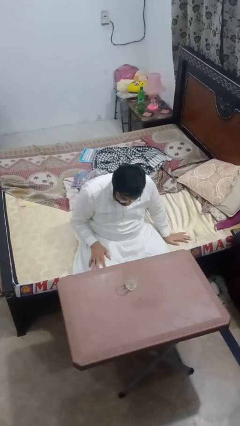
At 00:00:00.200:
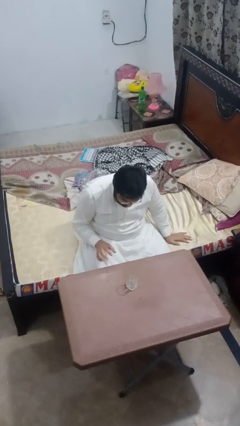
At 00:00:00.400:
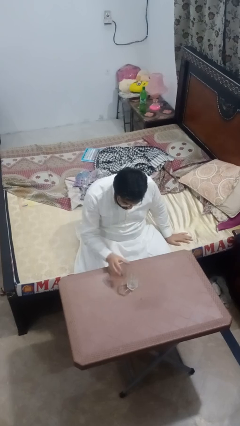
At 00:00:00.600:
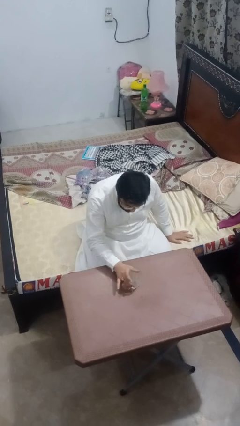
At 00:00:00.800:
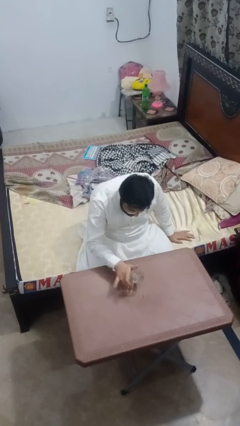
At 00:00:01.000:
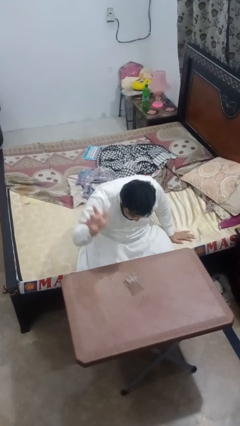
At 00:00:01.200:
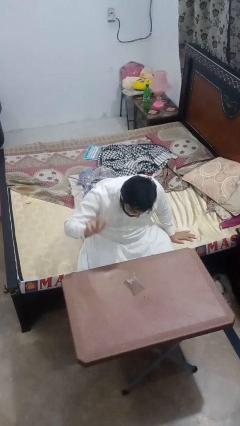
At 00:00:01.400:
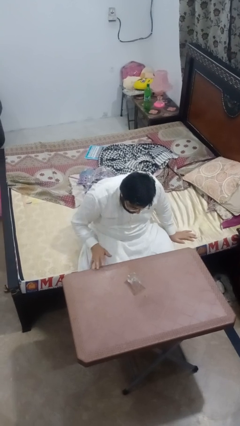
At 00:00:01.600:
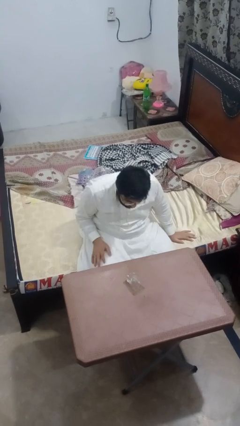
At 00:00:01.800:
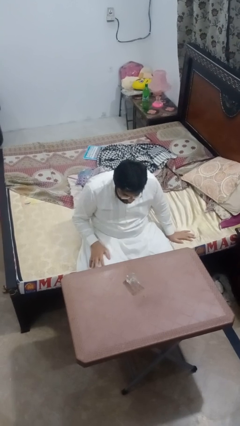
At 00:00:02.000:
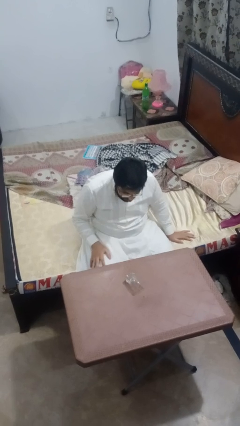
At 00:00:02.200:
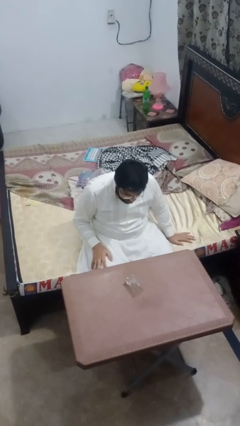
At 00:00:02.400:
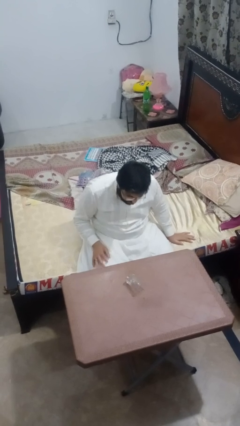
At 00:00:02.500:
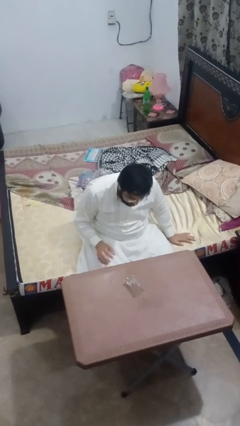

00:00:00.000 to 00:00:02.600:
person knocks over glass

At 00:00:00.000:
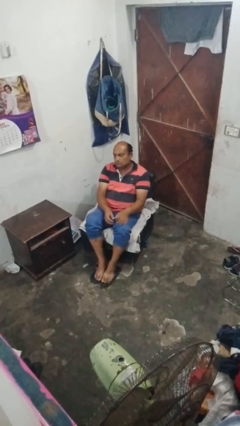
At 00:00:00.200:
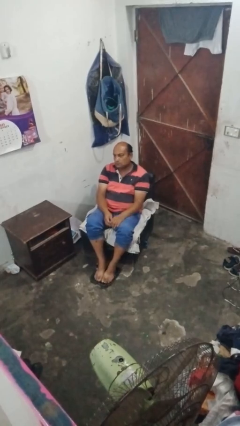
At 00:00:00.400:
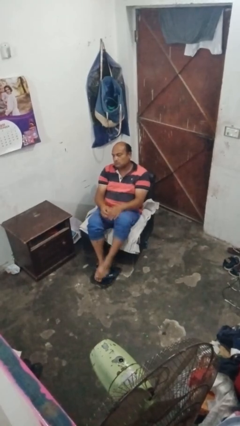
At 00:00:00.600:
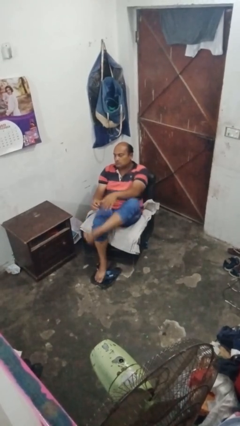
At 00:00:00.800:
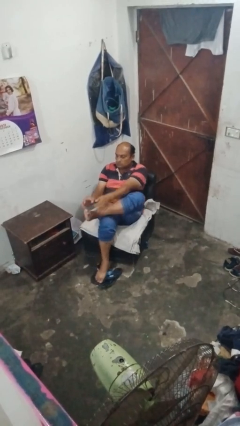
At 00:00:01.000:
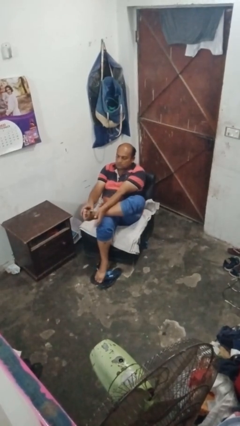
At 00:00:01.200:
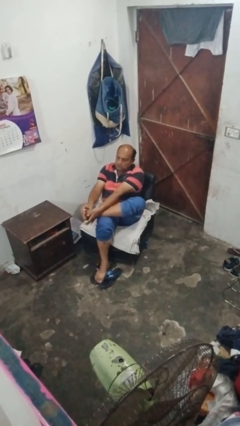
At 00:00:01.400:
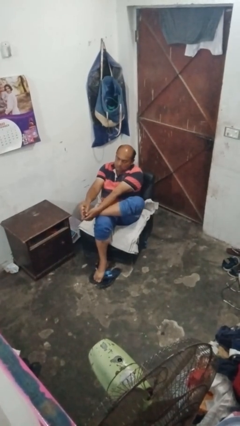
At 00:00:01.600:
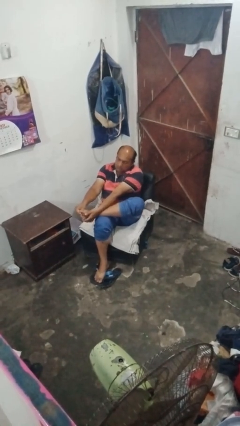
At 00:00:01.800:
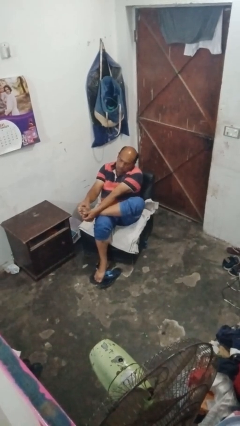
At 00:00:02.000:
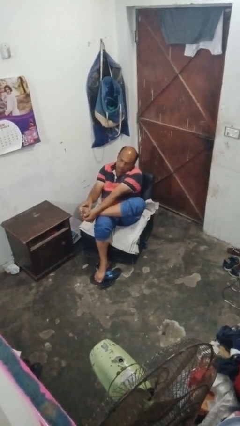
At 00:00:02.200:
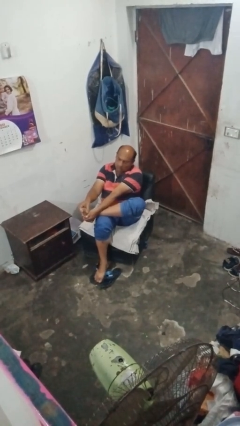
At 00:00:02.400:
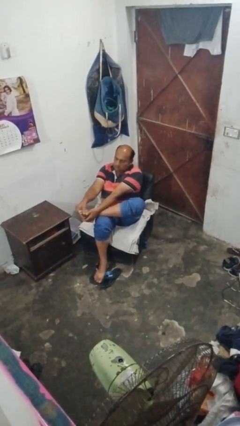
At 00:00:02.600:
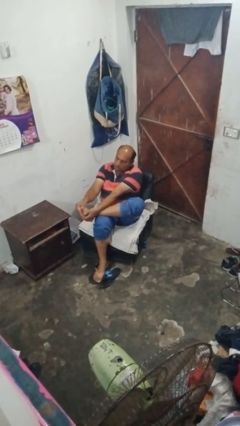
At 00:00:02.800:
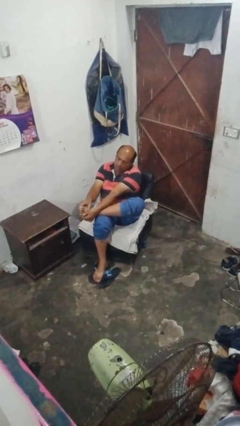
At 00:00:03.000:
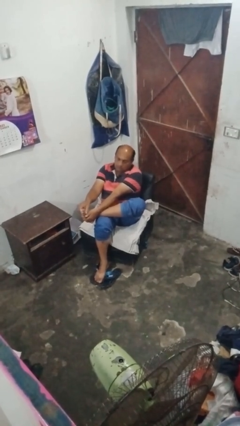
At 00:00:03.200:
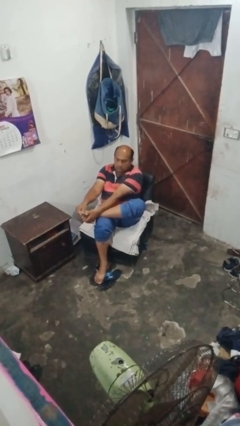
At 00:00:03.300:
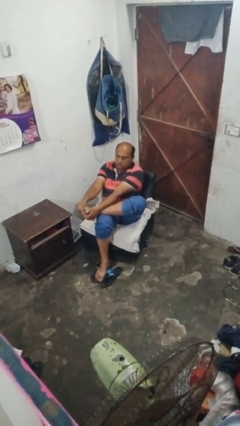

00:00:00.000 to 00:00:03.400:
person rubs foot

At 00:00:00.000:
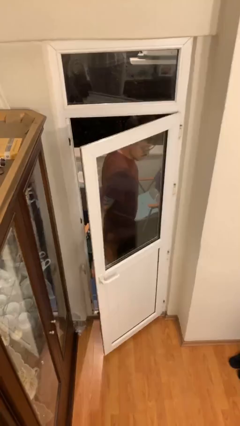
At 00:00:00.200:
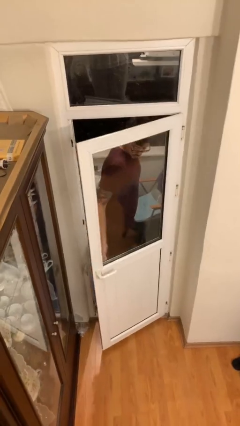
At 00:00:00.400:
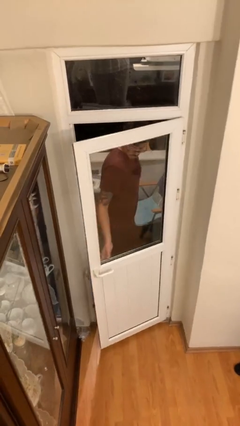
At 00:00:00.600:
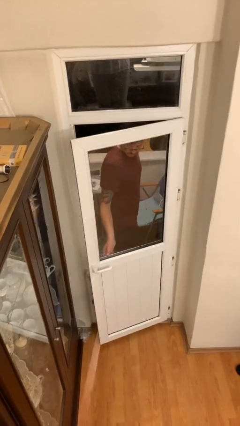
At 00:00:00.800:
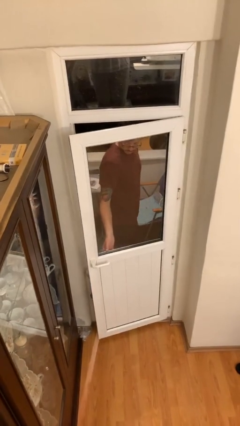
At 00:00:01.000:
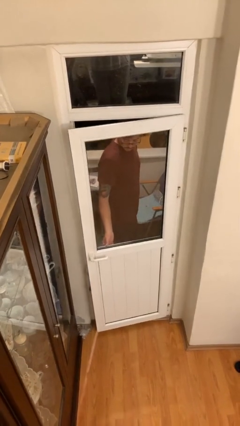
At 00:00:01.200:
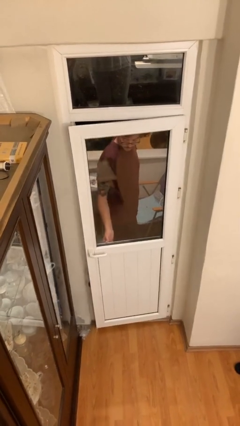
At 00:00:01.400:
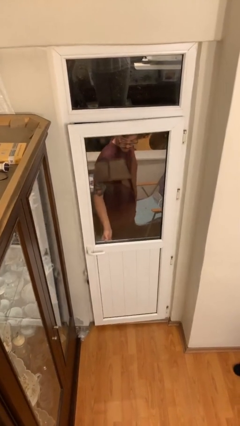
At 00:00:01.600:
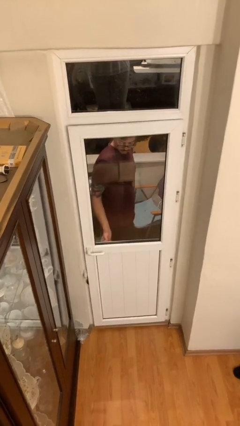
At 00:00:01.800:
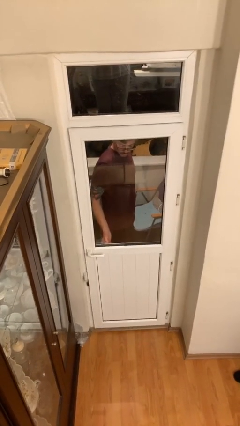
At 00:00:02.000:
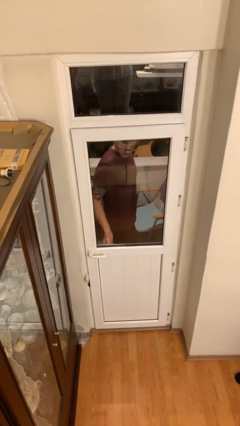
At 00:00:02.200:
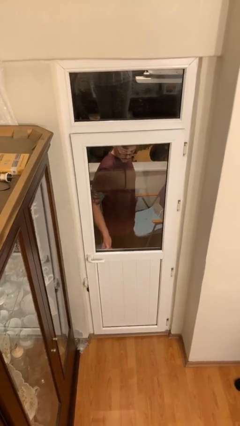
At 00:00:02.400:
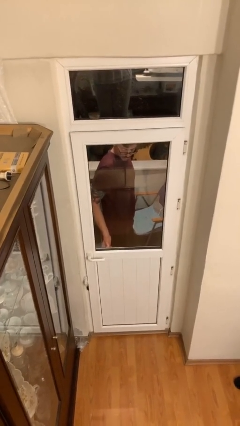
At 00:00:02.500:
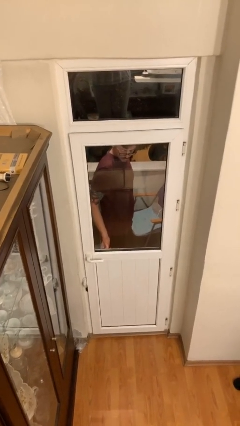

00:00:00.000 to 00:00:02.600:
person closes facility door

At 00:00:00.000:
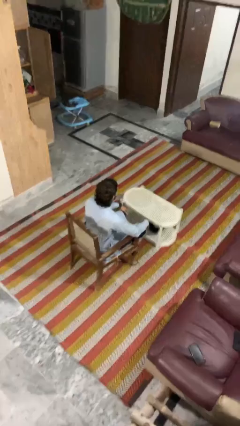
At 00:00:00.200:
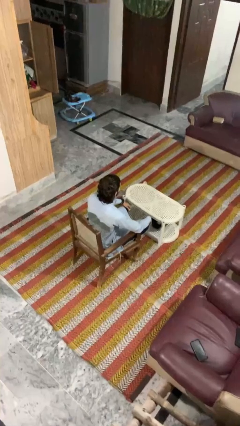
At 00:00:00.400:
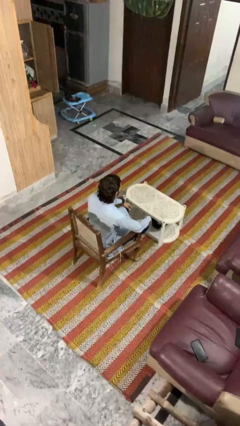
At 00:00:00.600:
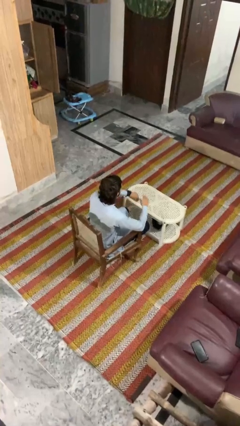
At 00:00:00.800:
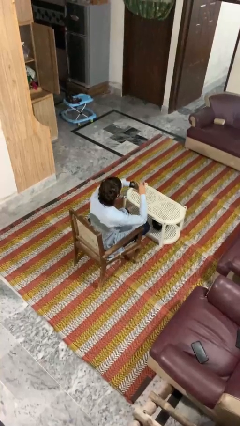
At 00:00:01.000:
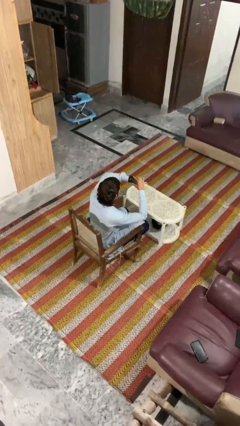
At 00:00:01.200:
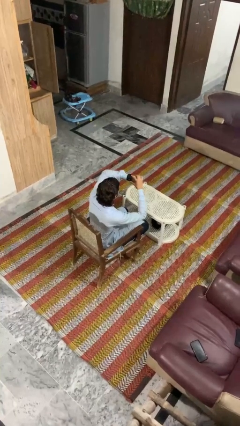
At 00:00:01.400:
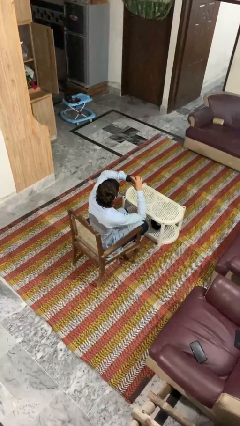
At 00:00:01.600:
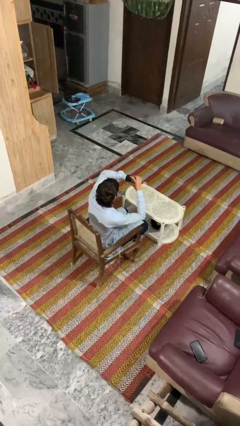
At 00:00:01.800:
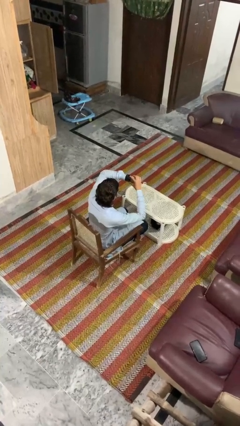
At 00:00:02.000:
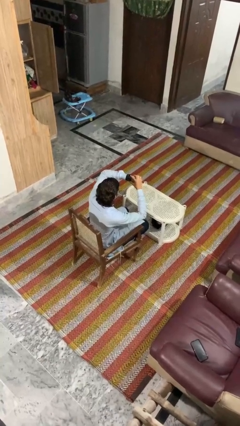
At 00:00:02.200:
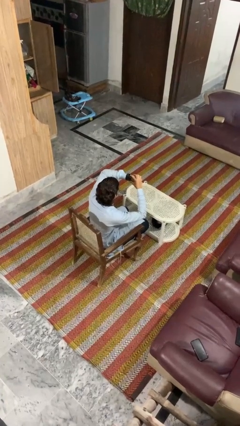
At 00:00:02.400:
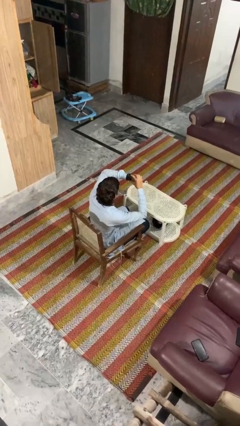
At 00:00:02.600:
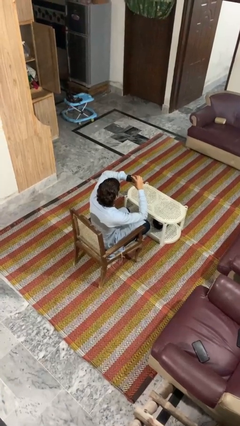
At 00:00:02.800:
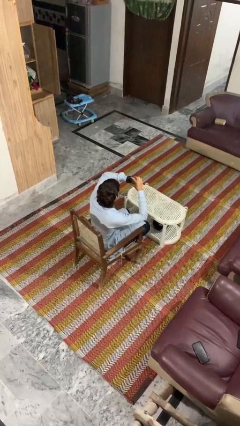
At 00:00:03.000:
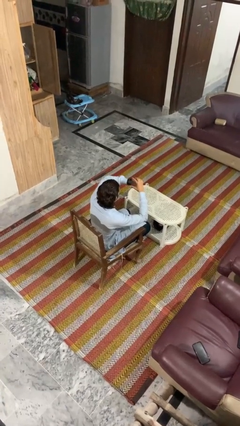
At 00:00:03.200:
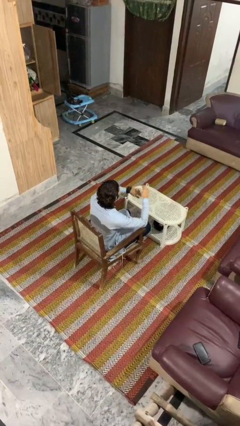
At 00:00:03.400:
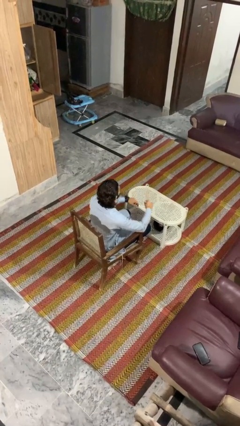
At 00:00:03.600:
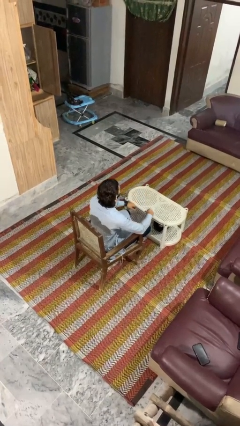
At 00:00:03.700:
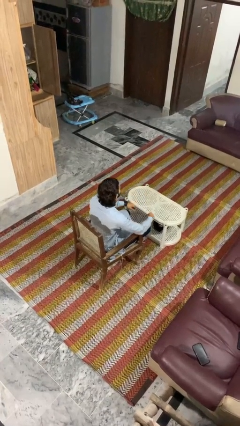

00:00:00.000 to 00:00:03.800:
person looks at wristwatch

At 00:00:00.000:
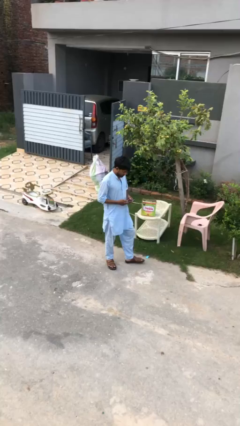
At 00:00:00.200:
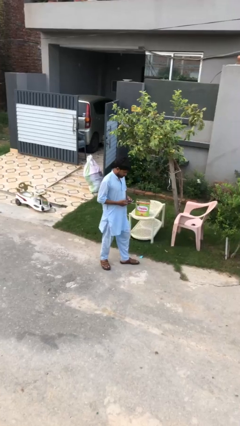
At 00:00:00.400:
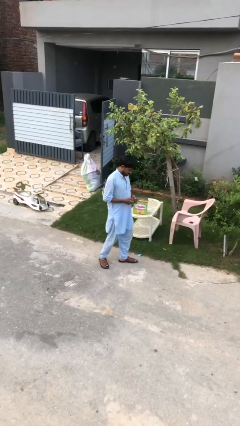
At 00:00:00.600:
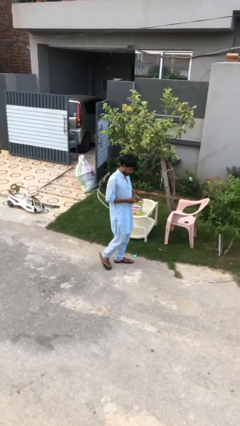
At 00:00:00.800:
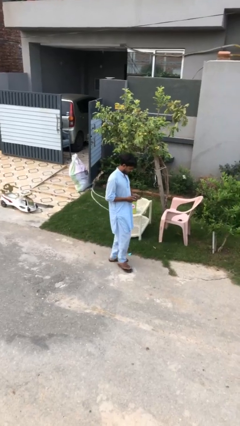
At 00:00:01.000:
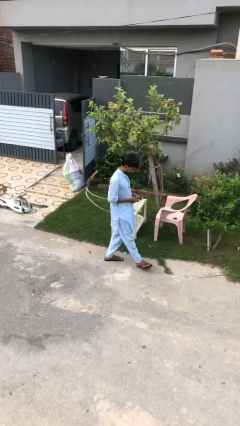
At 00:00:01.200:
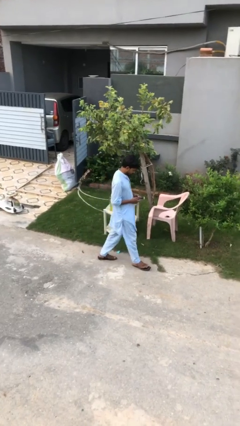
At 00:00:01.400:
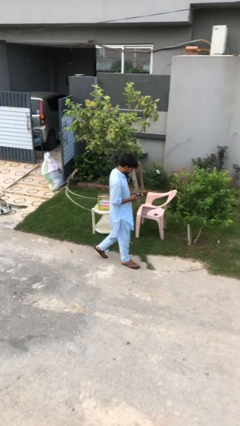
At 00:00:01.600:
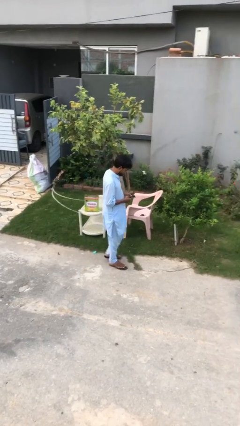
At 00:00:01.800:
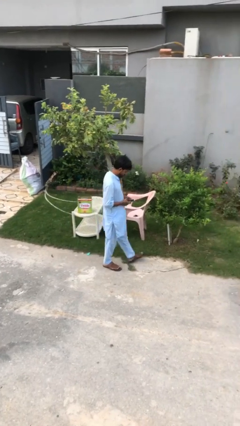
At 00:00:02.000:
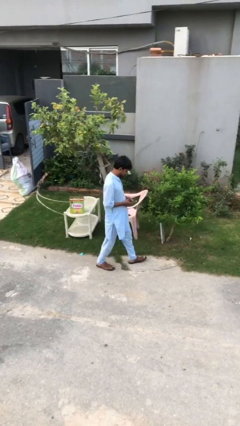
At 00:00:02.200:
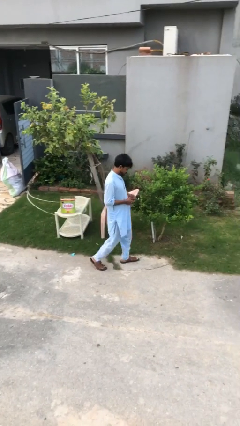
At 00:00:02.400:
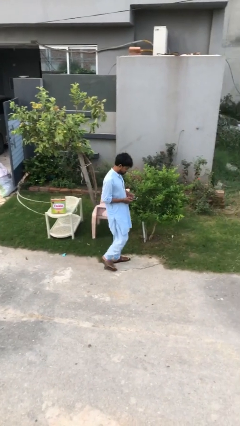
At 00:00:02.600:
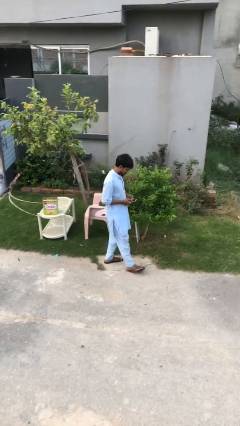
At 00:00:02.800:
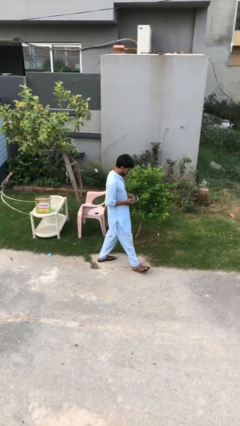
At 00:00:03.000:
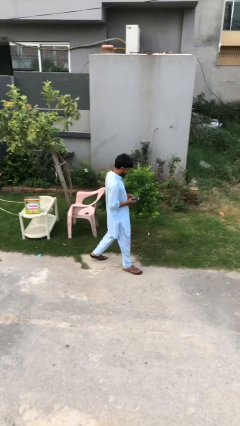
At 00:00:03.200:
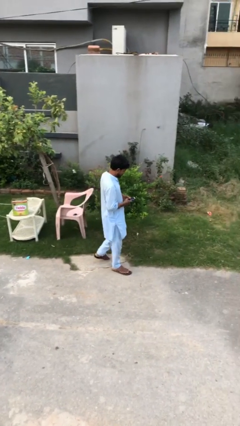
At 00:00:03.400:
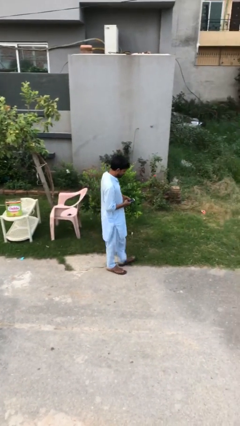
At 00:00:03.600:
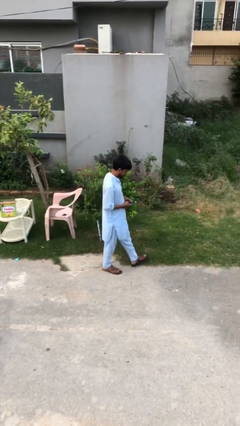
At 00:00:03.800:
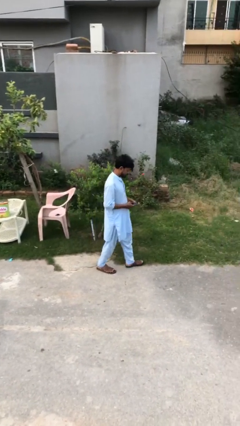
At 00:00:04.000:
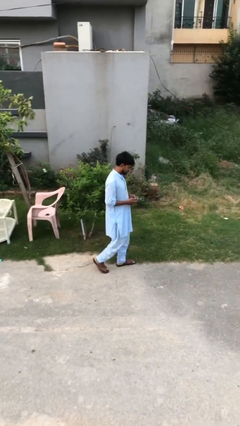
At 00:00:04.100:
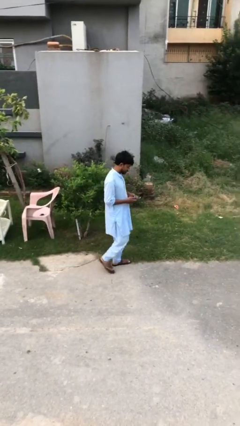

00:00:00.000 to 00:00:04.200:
person texts on phone

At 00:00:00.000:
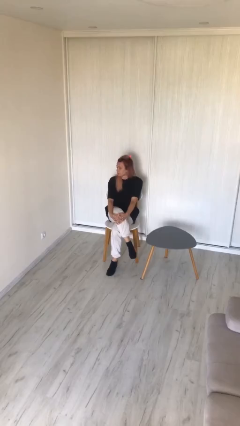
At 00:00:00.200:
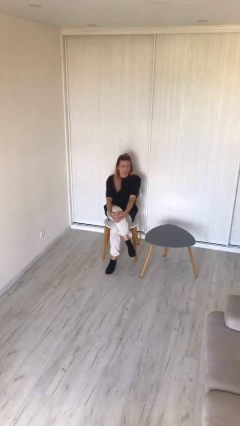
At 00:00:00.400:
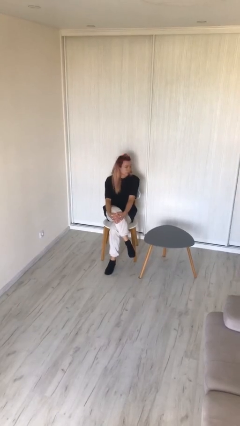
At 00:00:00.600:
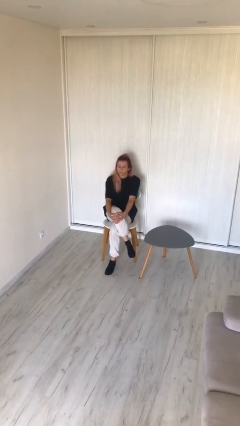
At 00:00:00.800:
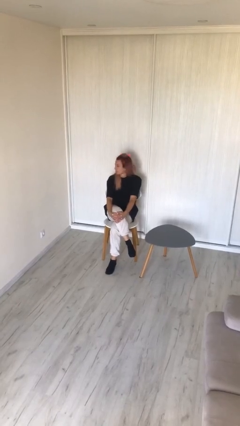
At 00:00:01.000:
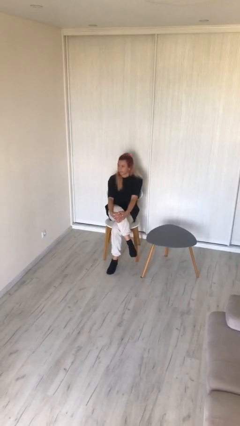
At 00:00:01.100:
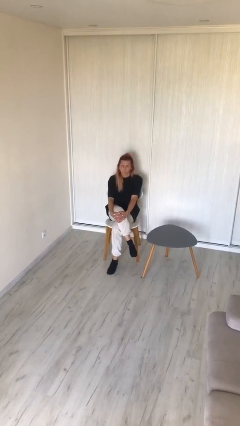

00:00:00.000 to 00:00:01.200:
person shakes head
